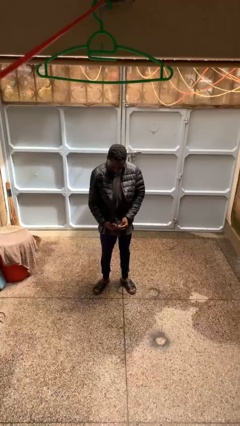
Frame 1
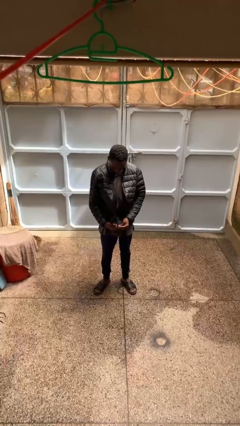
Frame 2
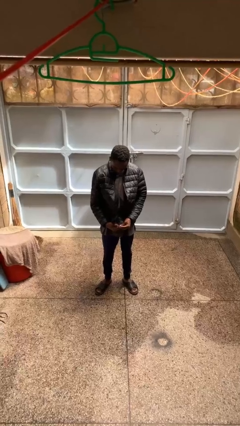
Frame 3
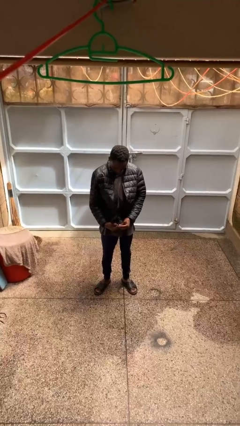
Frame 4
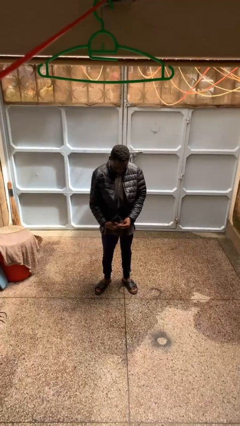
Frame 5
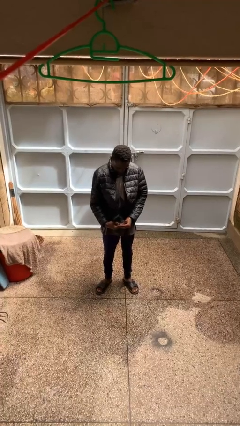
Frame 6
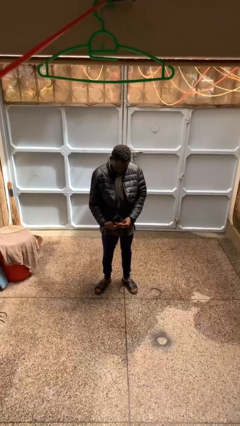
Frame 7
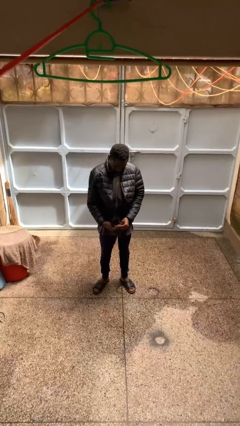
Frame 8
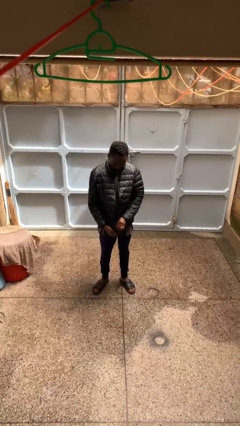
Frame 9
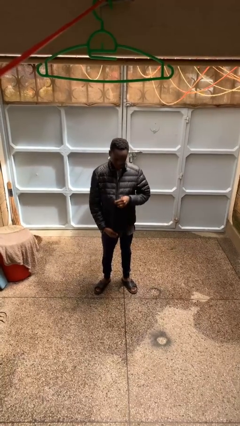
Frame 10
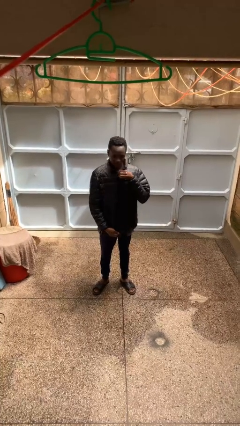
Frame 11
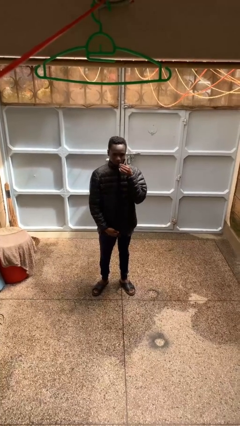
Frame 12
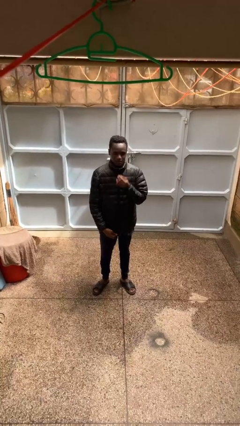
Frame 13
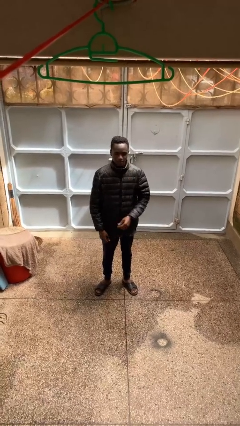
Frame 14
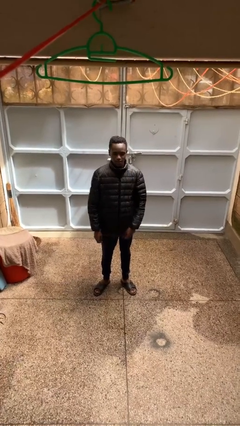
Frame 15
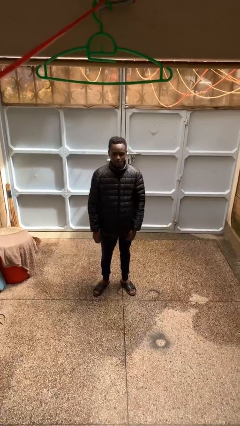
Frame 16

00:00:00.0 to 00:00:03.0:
person zips up jacket

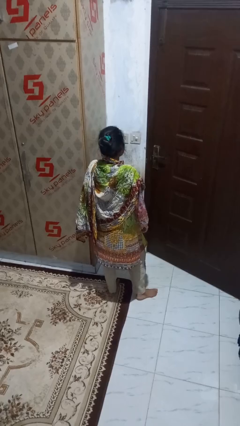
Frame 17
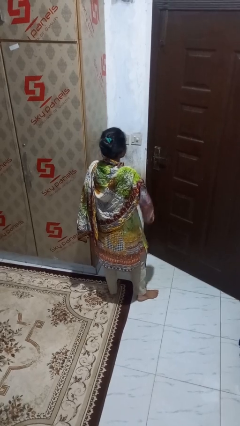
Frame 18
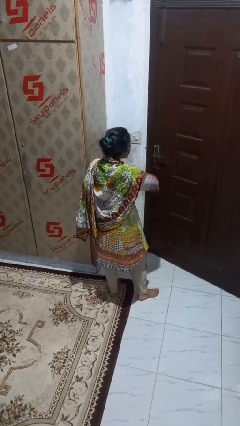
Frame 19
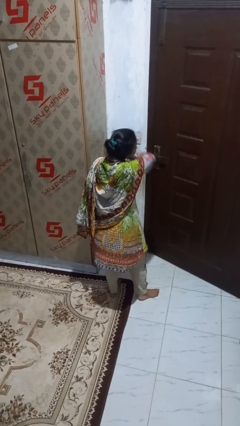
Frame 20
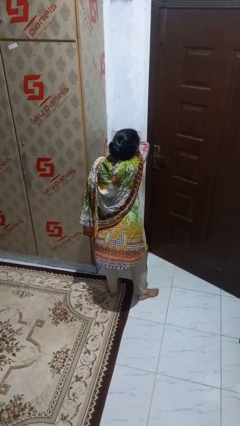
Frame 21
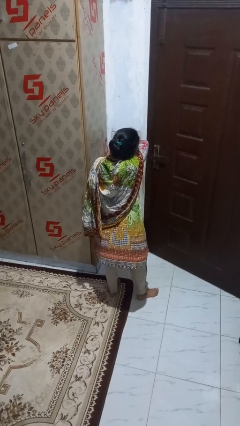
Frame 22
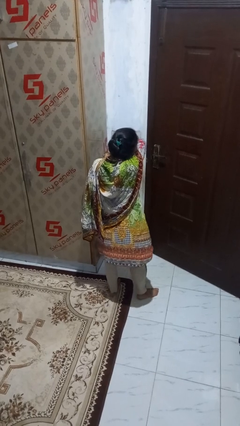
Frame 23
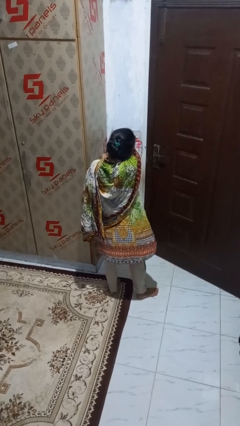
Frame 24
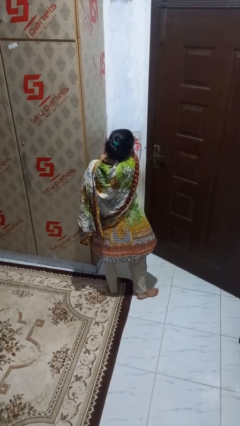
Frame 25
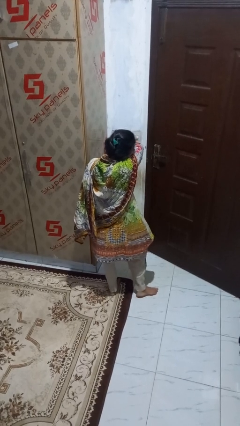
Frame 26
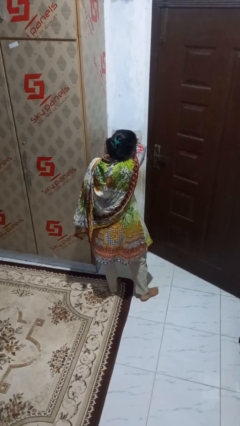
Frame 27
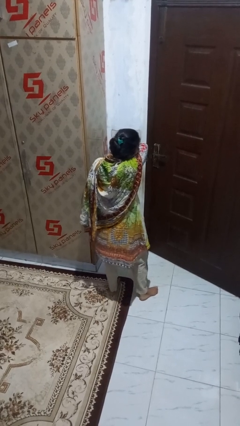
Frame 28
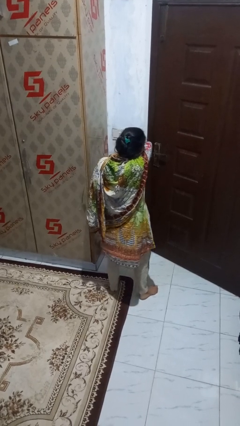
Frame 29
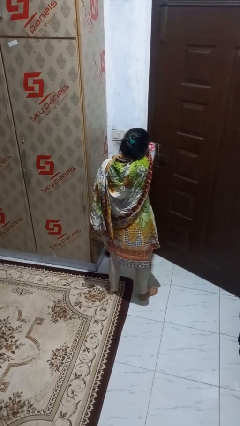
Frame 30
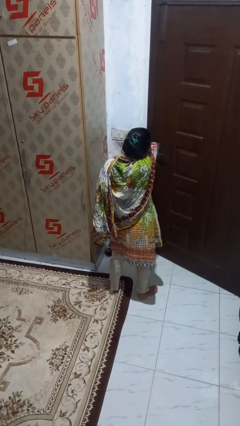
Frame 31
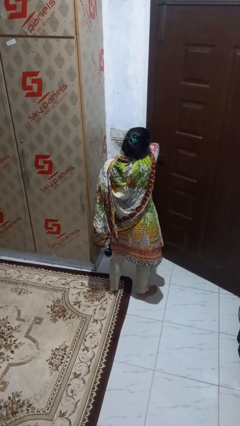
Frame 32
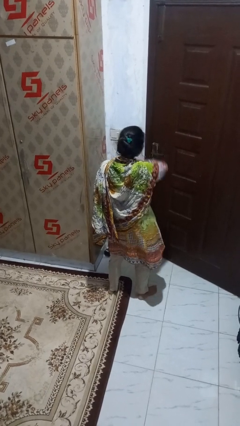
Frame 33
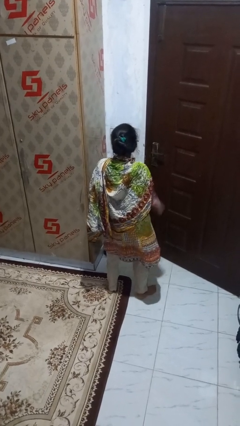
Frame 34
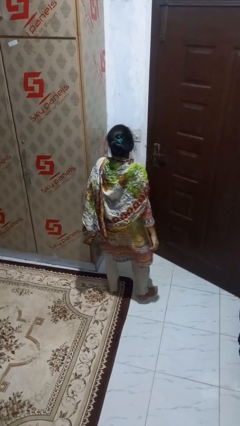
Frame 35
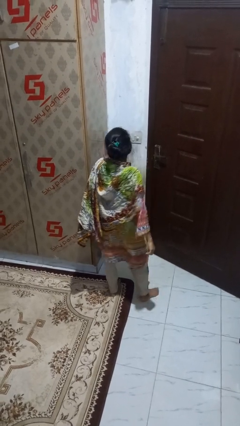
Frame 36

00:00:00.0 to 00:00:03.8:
person sneezes into arm

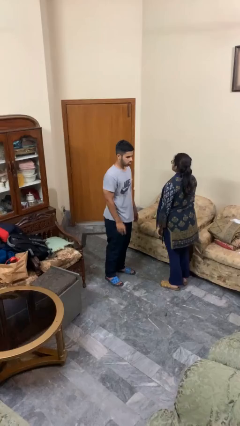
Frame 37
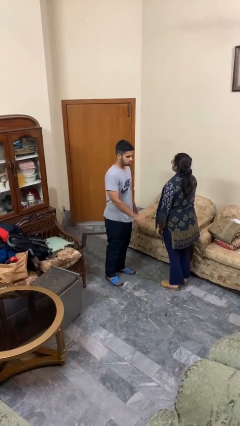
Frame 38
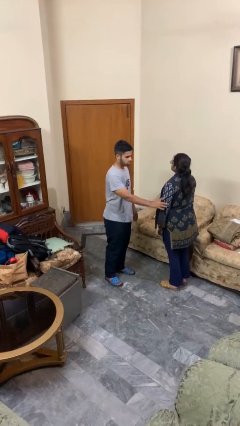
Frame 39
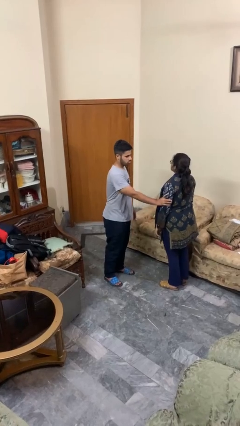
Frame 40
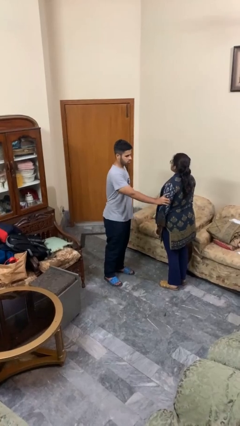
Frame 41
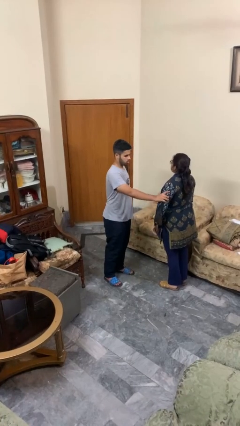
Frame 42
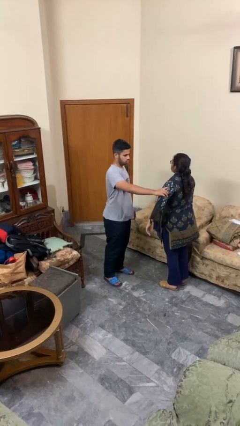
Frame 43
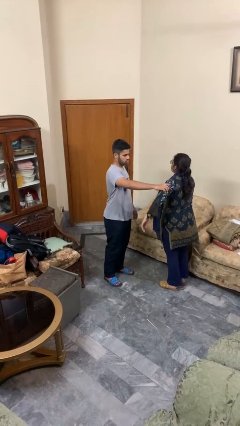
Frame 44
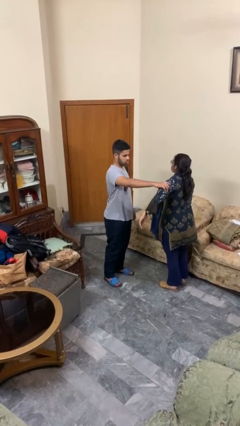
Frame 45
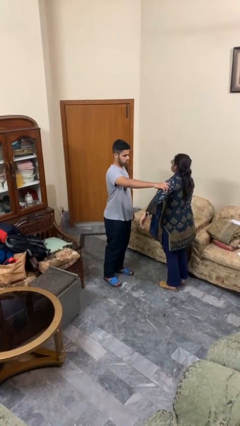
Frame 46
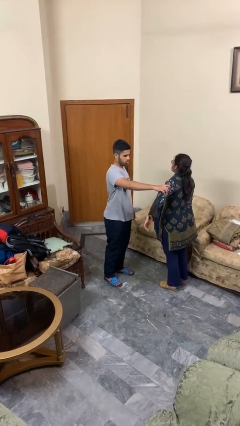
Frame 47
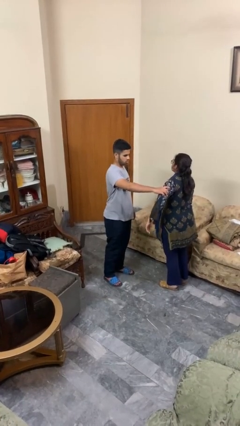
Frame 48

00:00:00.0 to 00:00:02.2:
person grabs person by bicep

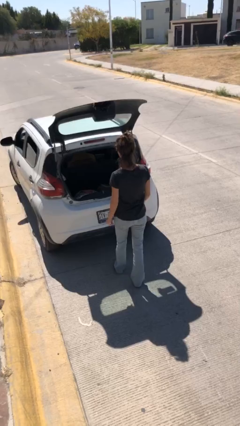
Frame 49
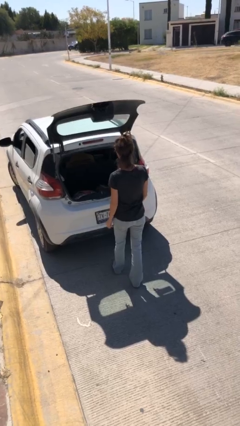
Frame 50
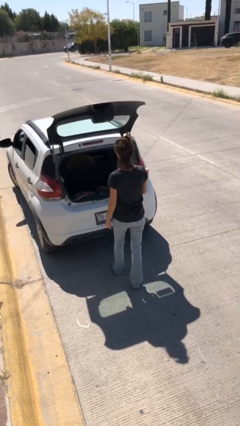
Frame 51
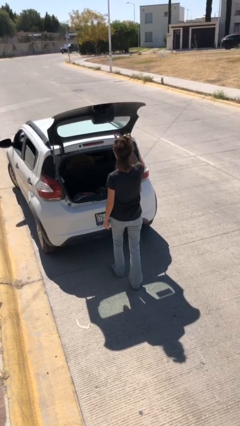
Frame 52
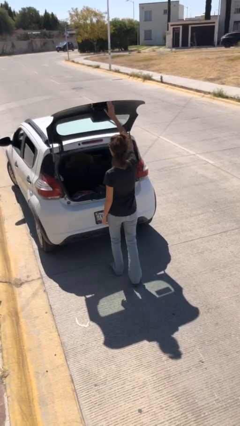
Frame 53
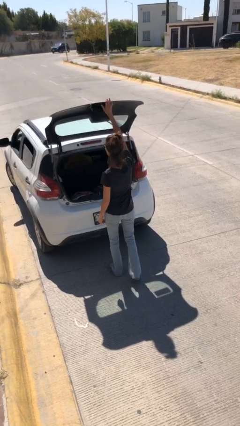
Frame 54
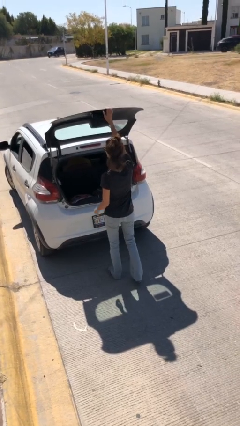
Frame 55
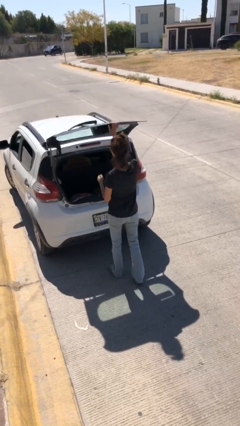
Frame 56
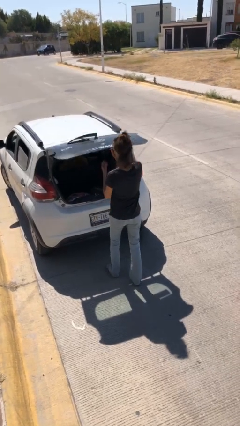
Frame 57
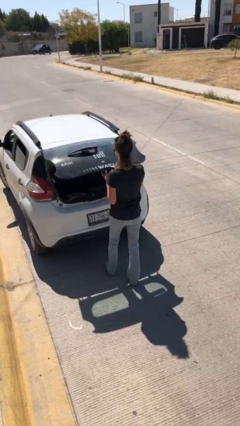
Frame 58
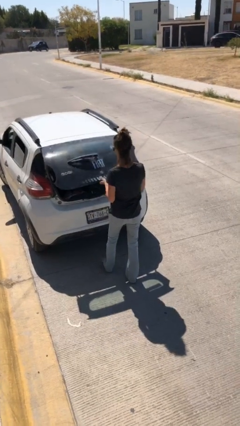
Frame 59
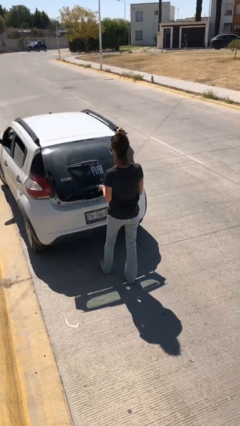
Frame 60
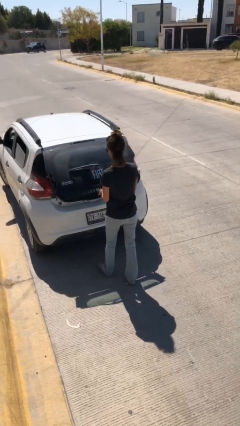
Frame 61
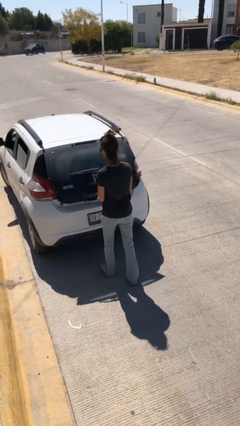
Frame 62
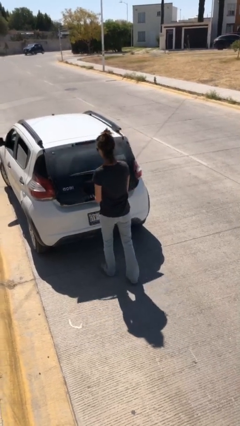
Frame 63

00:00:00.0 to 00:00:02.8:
person closes car trunk

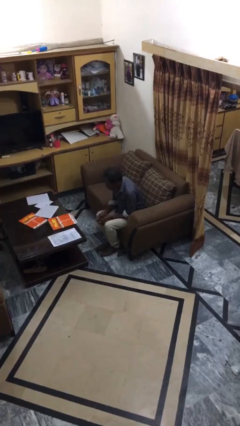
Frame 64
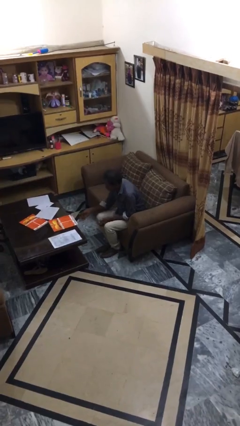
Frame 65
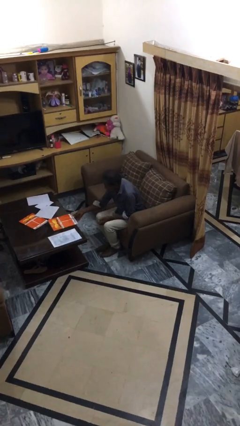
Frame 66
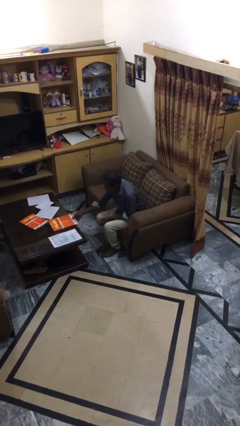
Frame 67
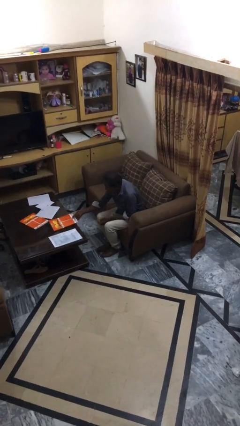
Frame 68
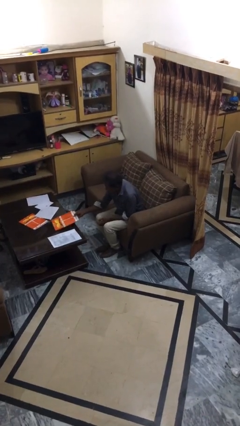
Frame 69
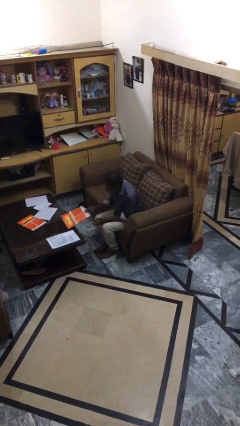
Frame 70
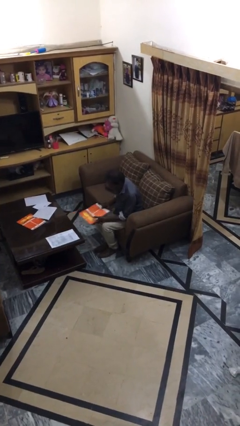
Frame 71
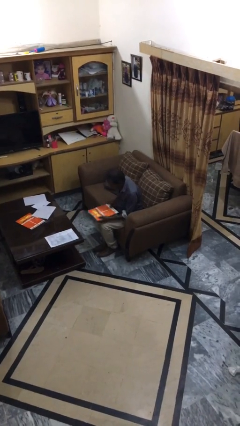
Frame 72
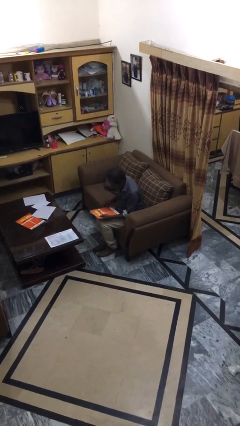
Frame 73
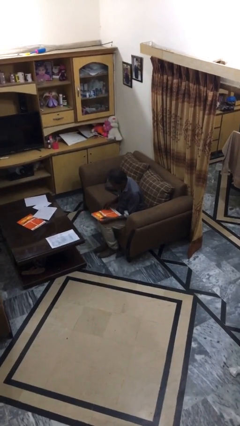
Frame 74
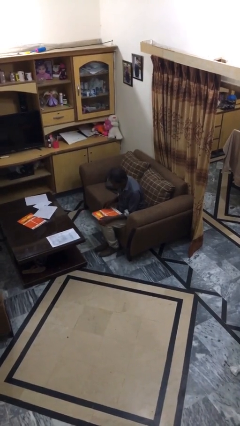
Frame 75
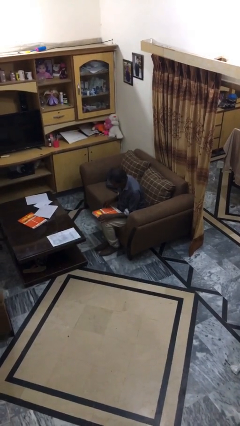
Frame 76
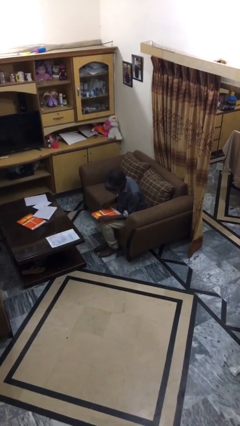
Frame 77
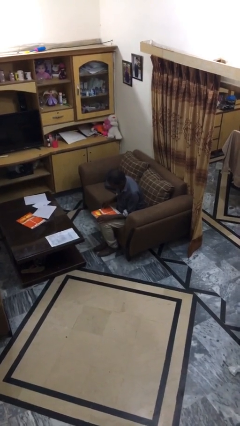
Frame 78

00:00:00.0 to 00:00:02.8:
person picks up object from table

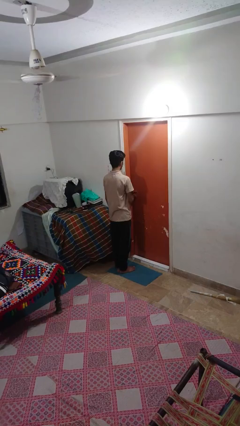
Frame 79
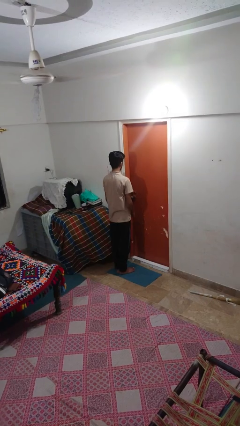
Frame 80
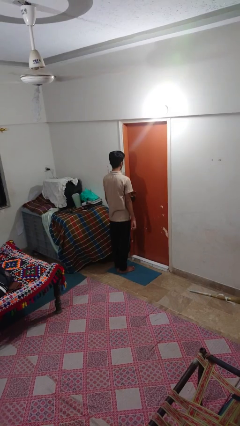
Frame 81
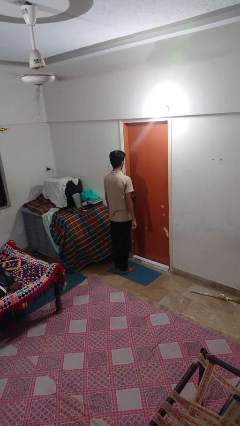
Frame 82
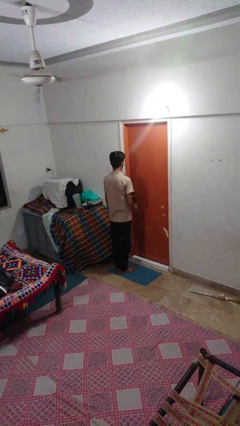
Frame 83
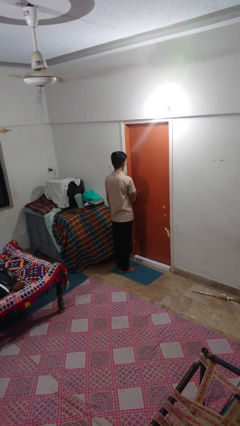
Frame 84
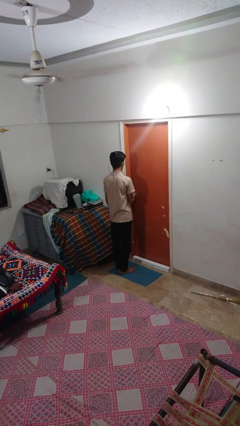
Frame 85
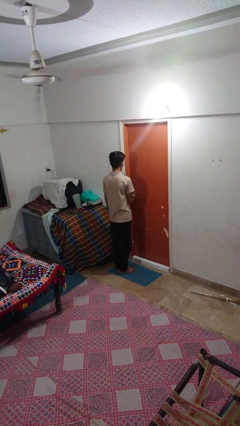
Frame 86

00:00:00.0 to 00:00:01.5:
person unlocks door with keys

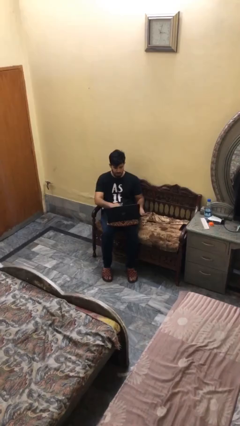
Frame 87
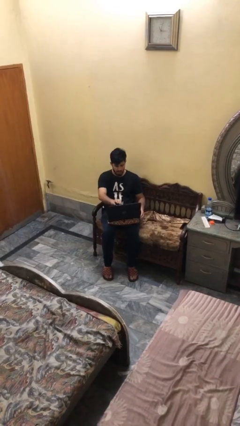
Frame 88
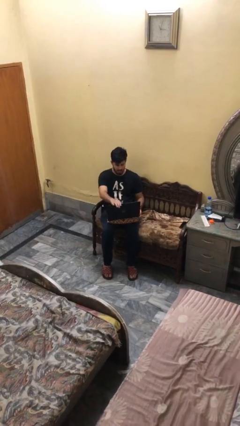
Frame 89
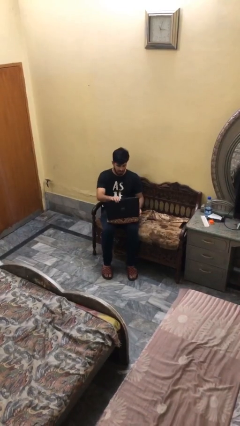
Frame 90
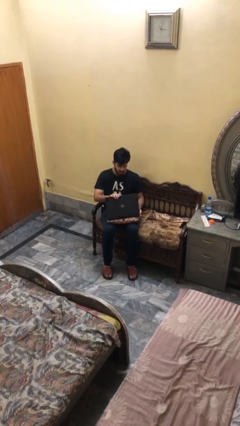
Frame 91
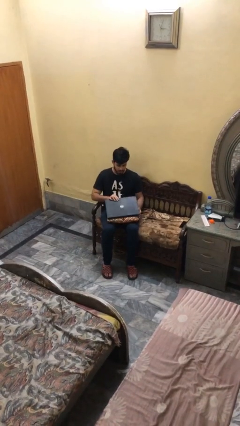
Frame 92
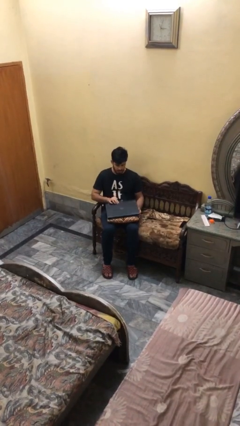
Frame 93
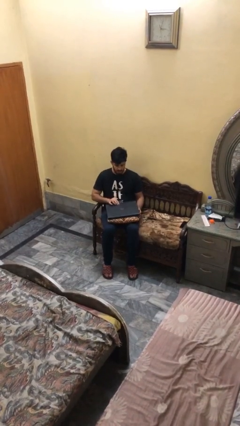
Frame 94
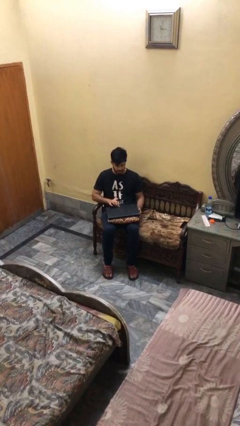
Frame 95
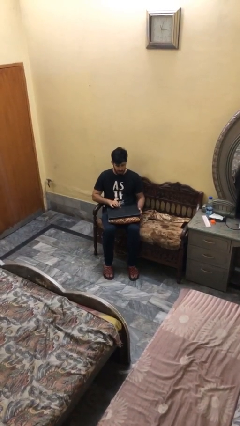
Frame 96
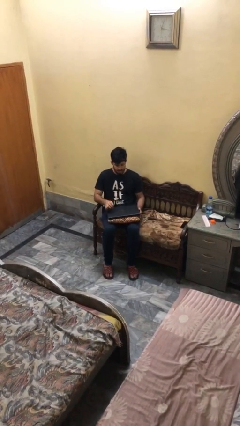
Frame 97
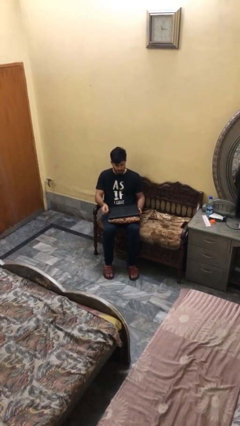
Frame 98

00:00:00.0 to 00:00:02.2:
person closes laptop
